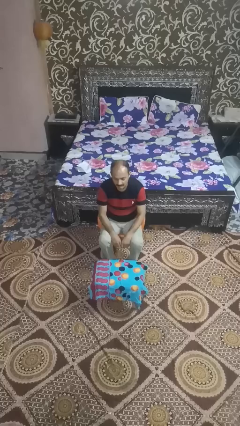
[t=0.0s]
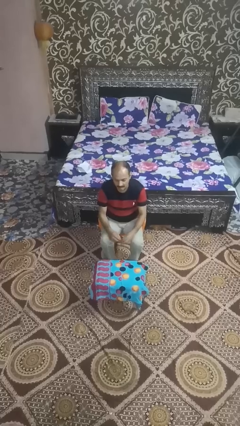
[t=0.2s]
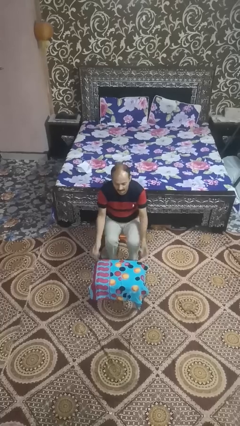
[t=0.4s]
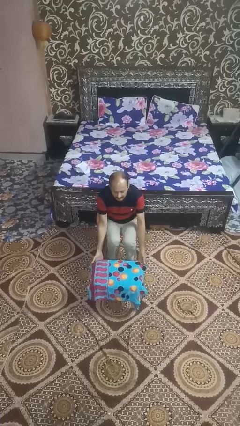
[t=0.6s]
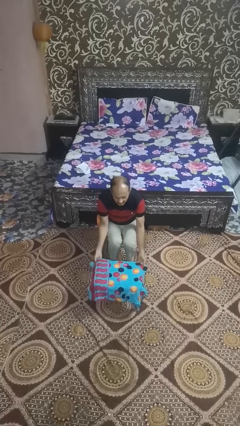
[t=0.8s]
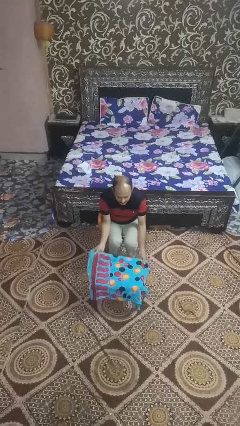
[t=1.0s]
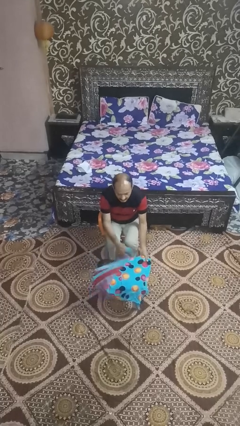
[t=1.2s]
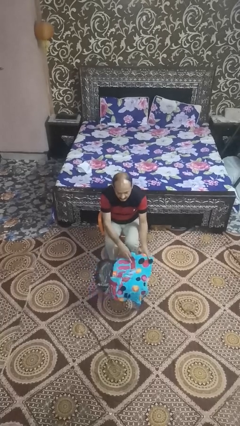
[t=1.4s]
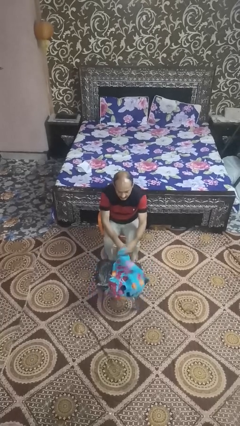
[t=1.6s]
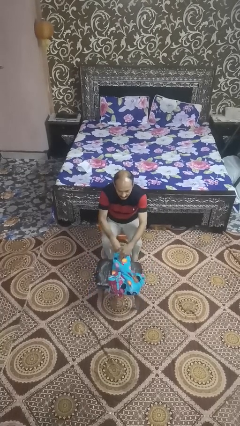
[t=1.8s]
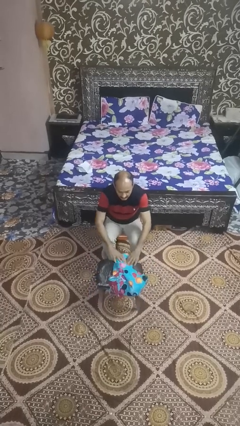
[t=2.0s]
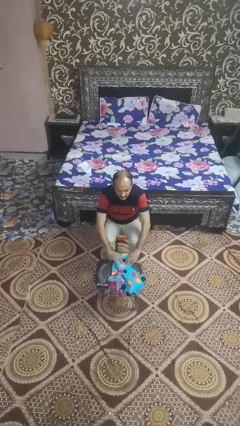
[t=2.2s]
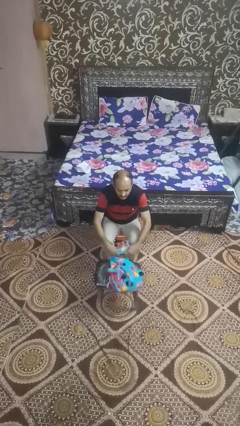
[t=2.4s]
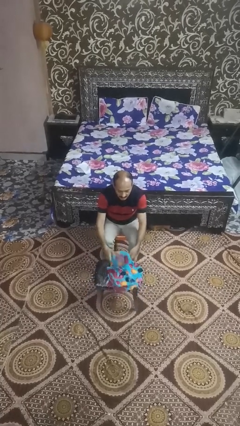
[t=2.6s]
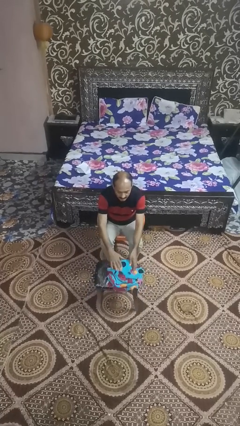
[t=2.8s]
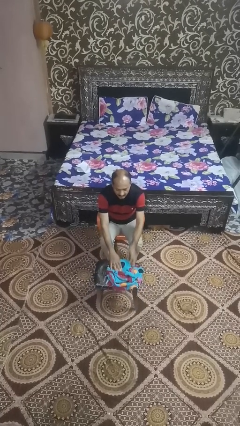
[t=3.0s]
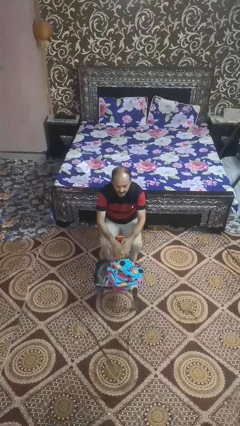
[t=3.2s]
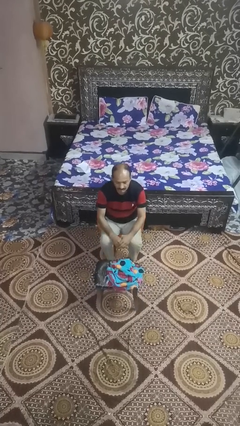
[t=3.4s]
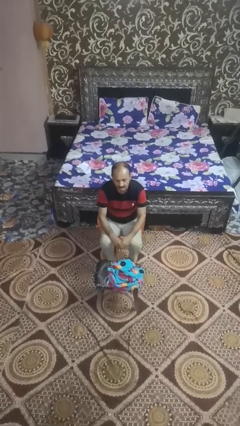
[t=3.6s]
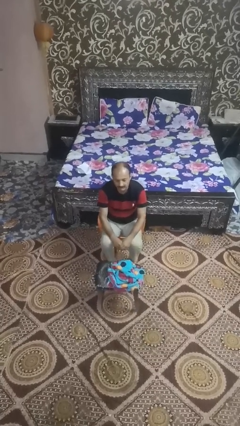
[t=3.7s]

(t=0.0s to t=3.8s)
person folds tablecloth

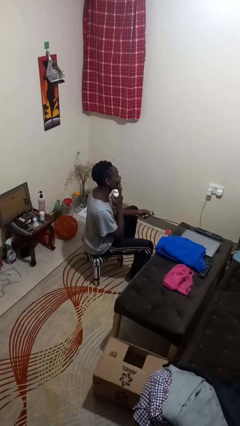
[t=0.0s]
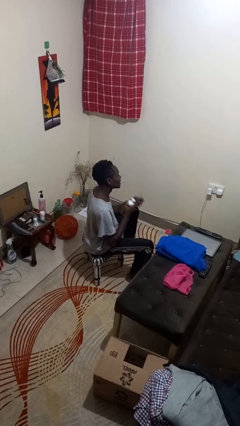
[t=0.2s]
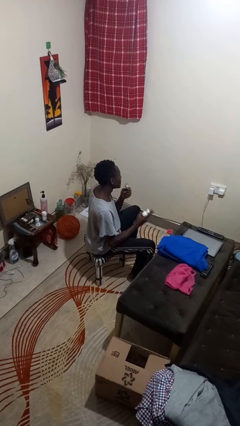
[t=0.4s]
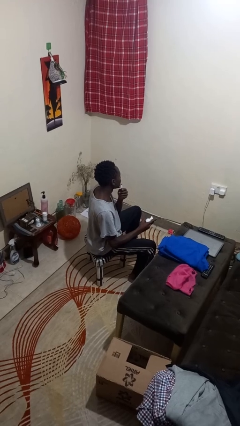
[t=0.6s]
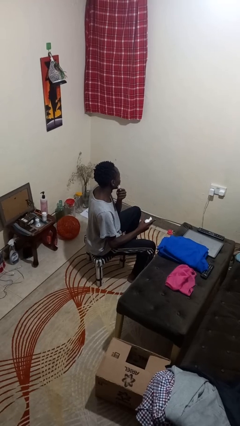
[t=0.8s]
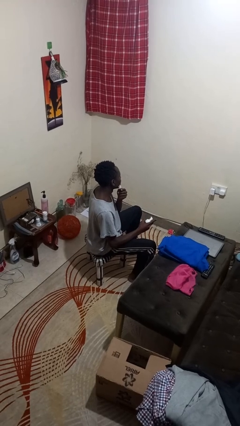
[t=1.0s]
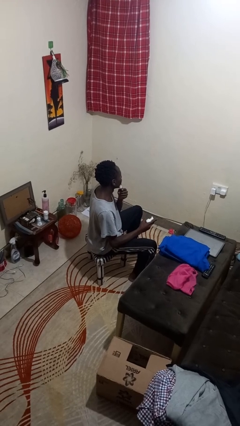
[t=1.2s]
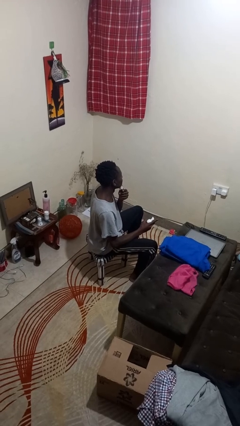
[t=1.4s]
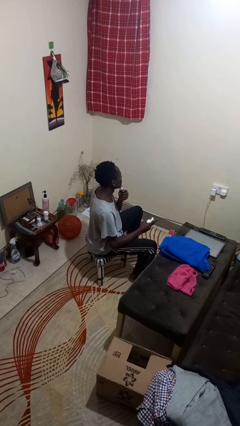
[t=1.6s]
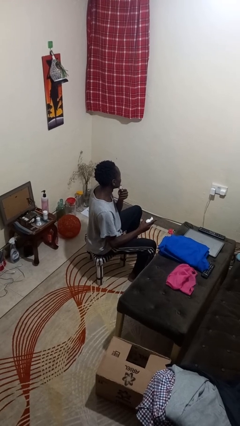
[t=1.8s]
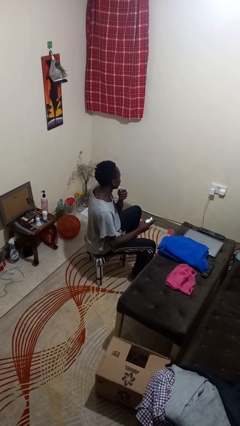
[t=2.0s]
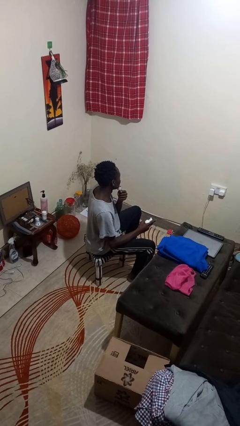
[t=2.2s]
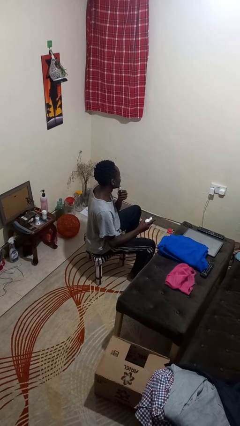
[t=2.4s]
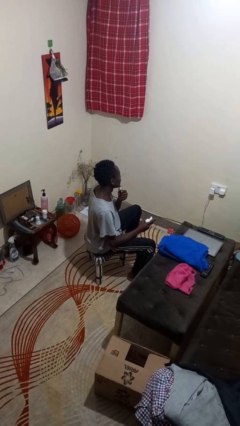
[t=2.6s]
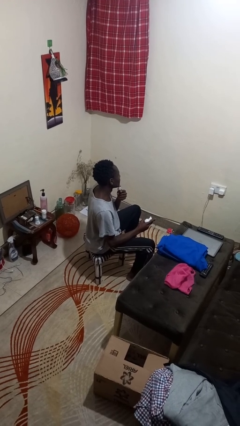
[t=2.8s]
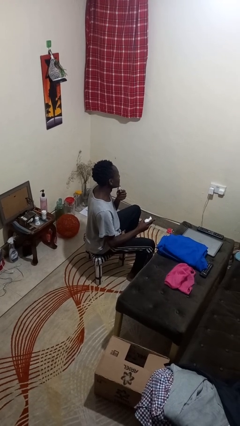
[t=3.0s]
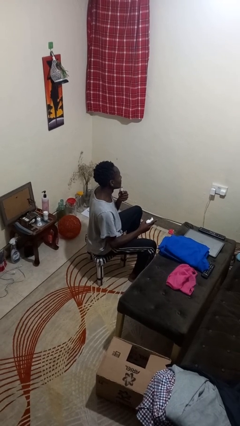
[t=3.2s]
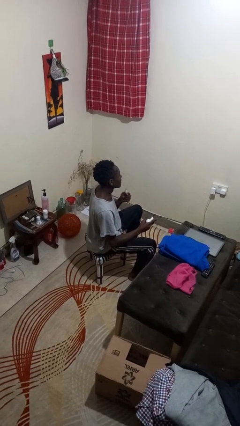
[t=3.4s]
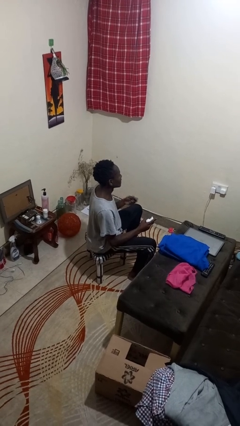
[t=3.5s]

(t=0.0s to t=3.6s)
person shaves face

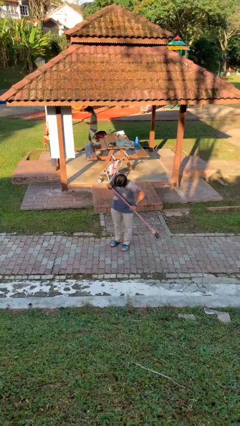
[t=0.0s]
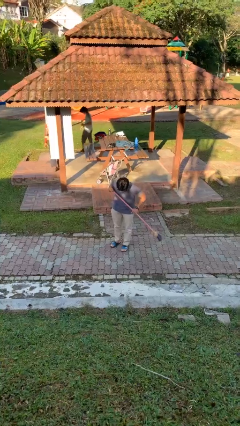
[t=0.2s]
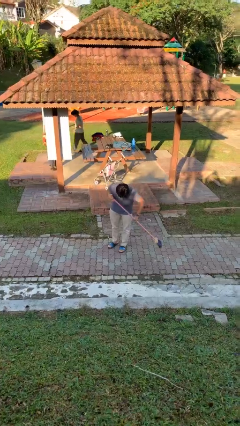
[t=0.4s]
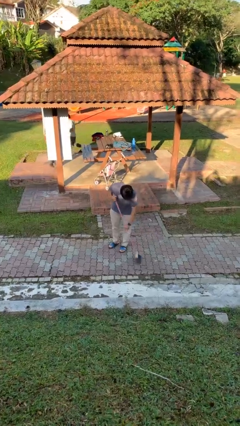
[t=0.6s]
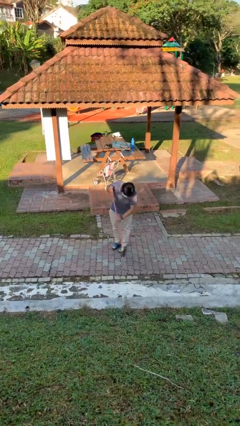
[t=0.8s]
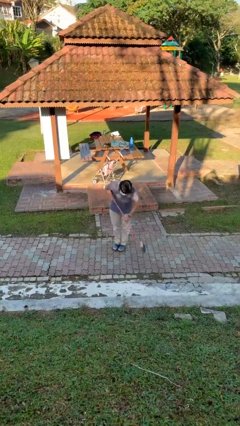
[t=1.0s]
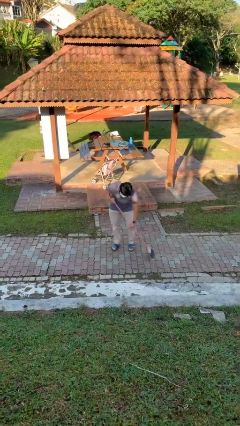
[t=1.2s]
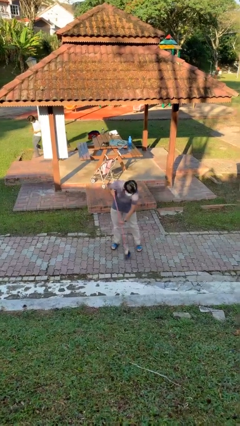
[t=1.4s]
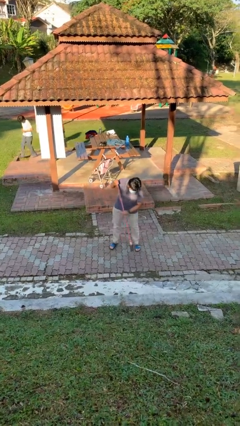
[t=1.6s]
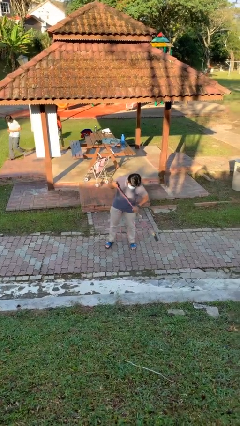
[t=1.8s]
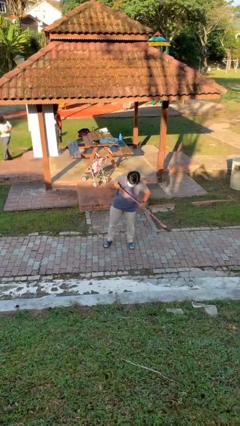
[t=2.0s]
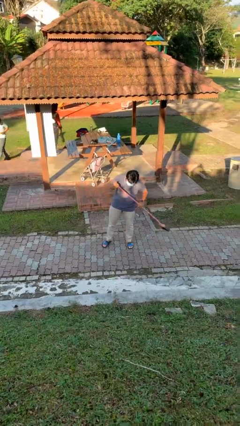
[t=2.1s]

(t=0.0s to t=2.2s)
person sweeps floor

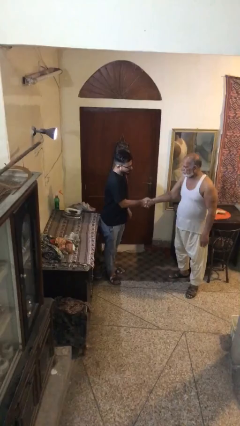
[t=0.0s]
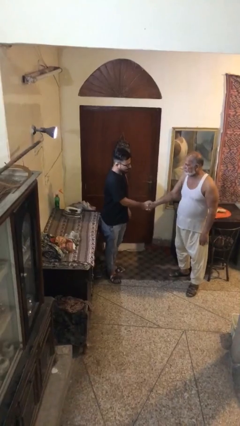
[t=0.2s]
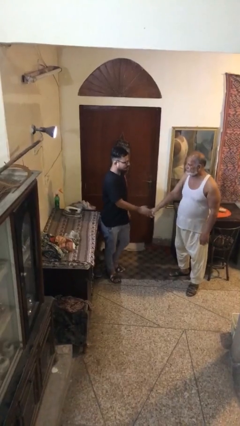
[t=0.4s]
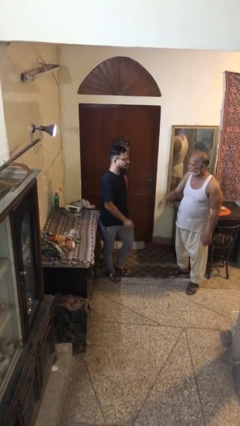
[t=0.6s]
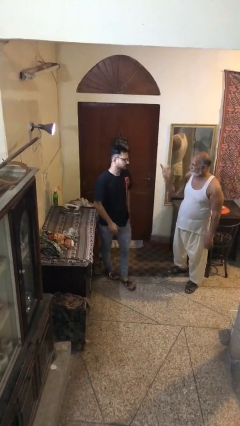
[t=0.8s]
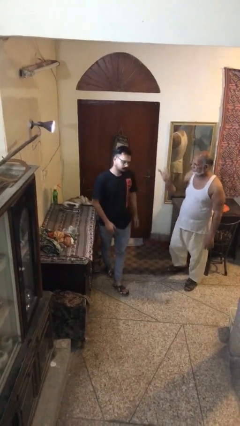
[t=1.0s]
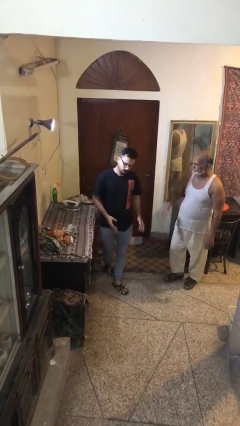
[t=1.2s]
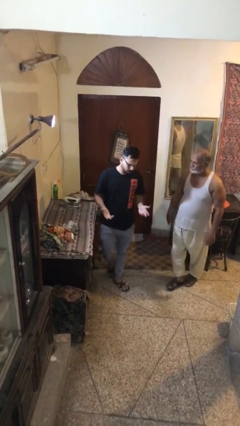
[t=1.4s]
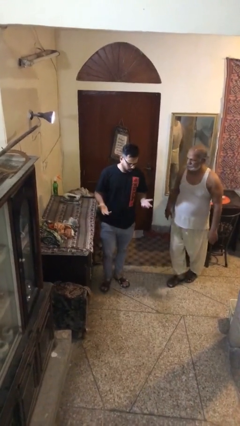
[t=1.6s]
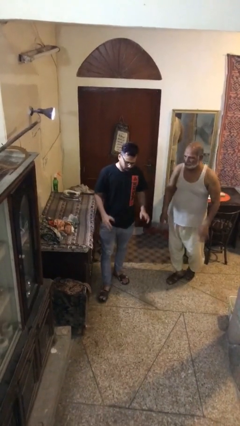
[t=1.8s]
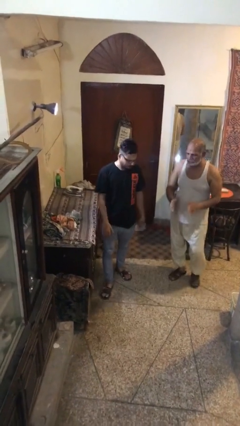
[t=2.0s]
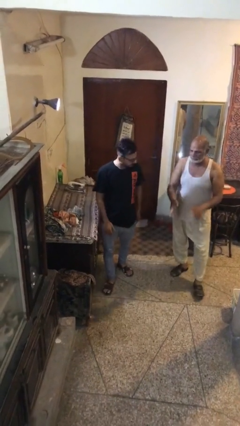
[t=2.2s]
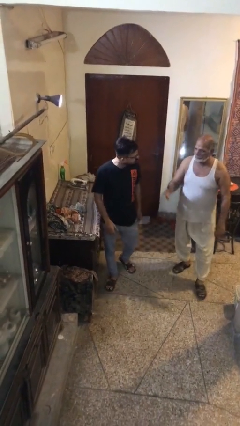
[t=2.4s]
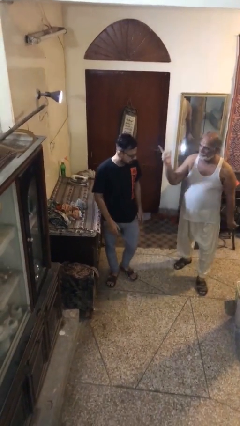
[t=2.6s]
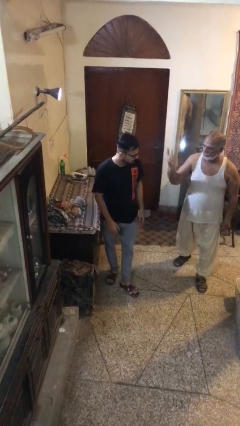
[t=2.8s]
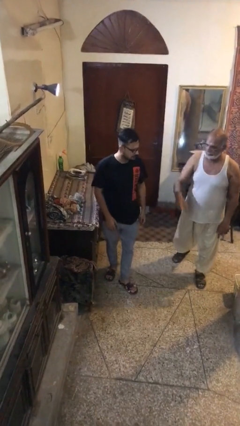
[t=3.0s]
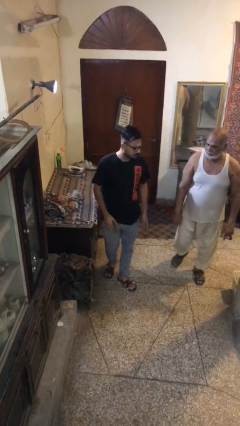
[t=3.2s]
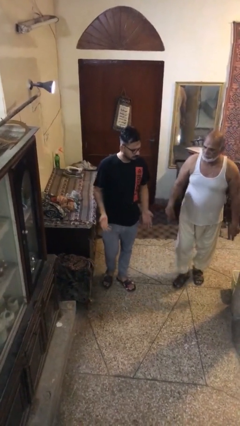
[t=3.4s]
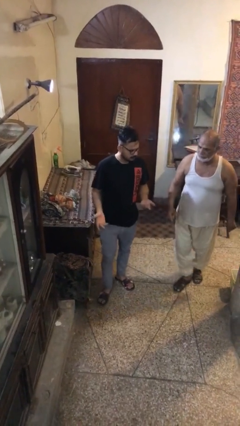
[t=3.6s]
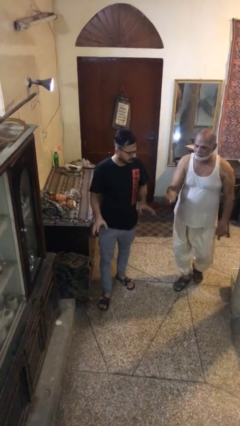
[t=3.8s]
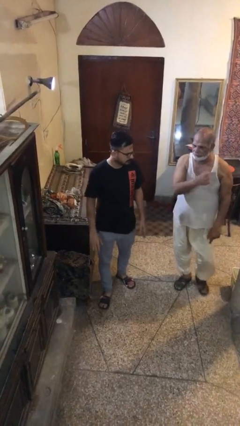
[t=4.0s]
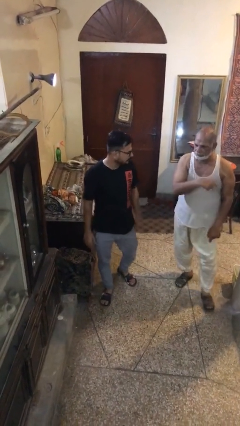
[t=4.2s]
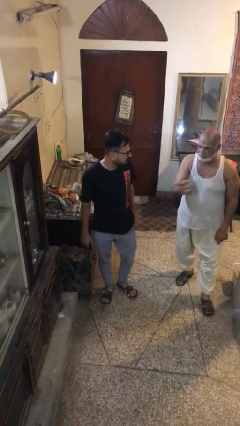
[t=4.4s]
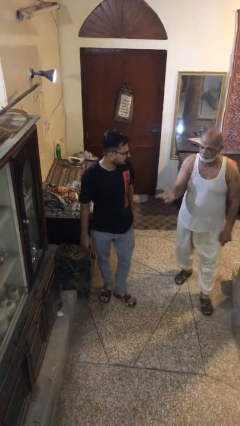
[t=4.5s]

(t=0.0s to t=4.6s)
person talks to person

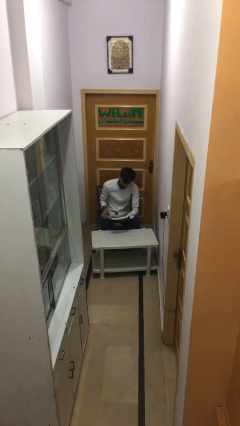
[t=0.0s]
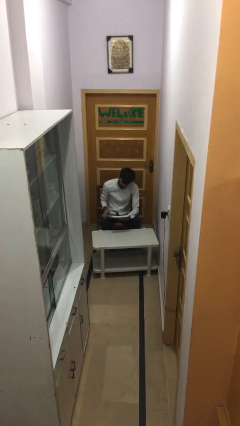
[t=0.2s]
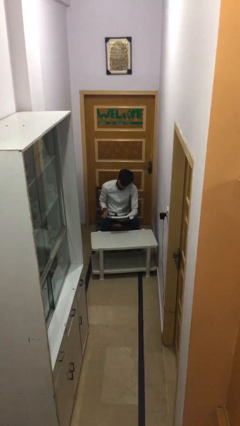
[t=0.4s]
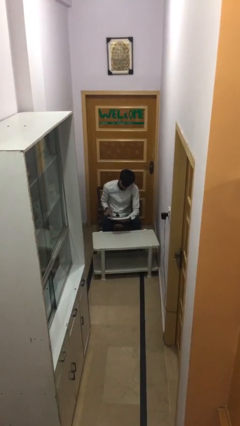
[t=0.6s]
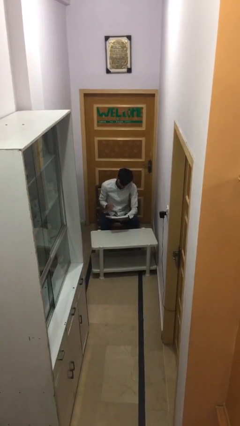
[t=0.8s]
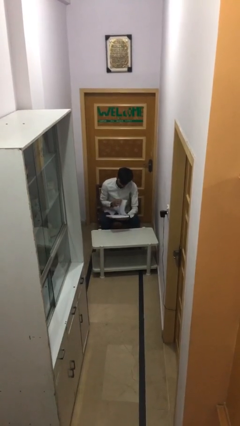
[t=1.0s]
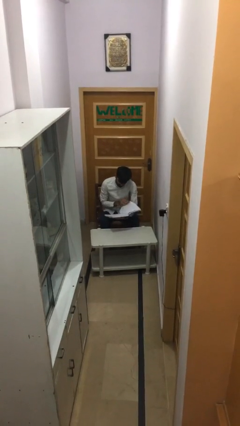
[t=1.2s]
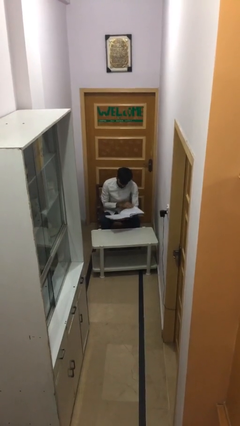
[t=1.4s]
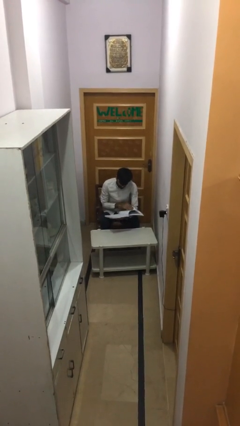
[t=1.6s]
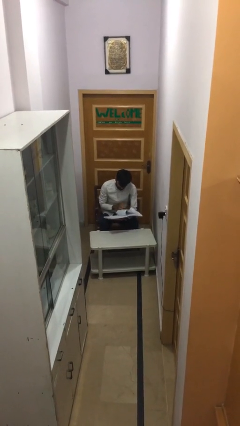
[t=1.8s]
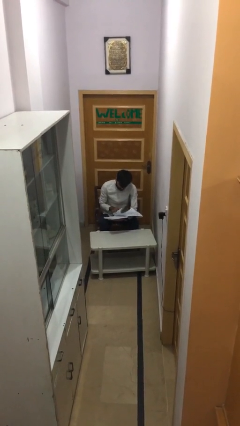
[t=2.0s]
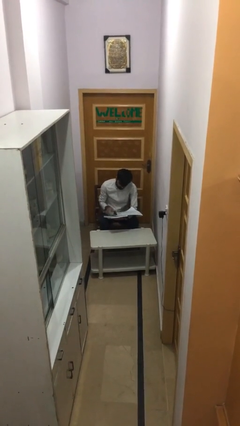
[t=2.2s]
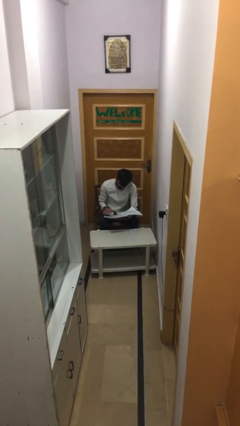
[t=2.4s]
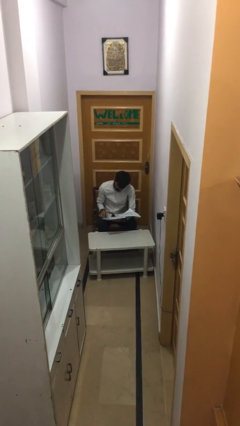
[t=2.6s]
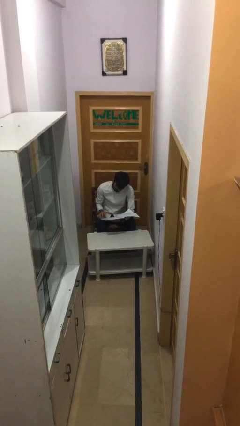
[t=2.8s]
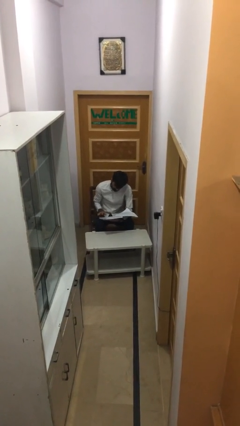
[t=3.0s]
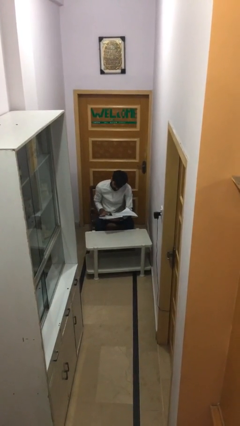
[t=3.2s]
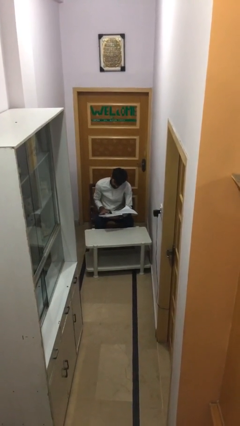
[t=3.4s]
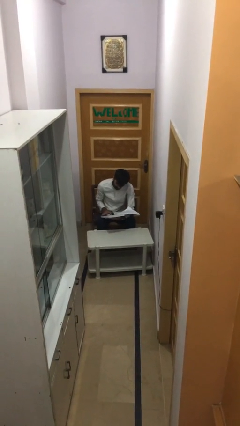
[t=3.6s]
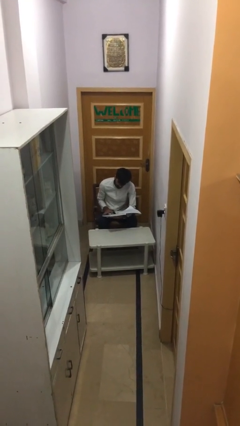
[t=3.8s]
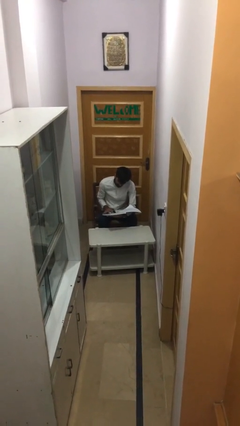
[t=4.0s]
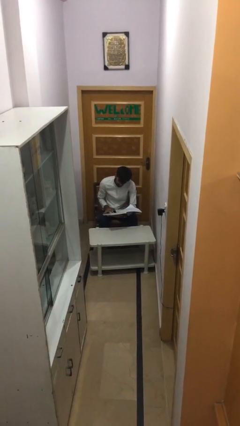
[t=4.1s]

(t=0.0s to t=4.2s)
person reads document
